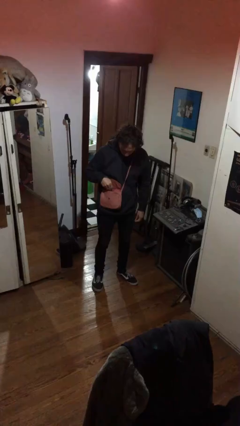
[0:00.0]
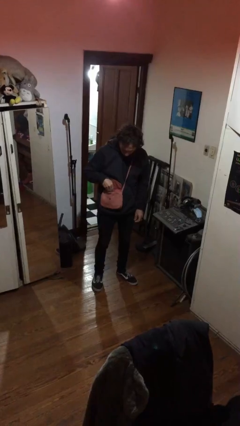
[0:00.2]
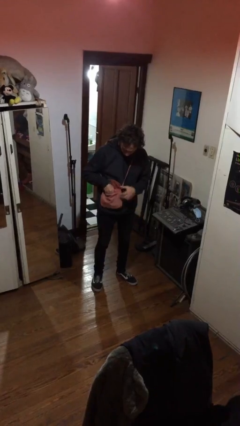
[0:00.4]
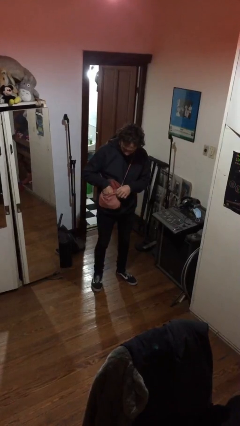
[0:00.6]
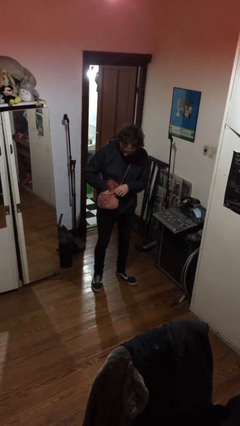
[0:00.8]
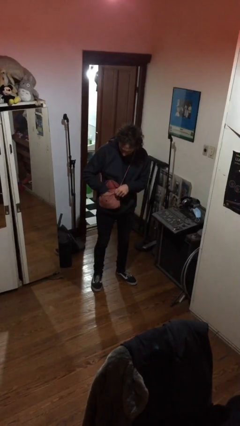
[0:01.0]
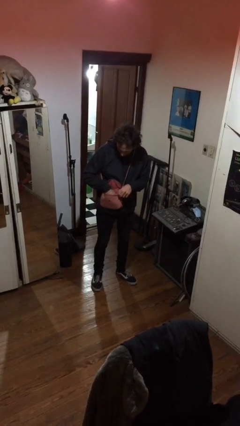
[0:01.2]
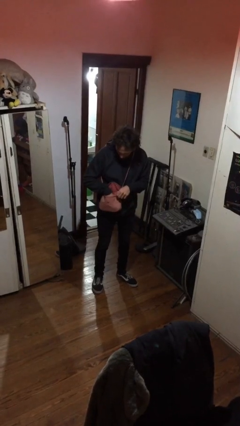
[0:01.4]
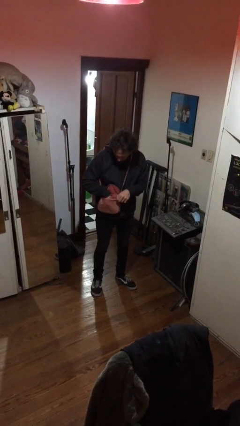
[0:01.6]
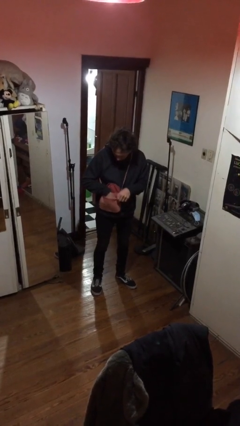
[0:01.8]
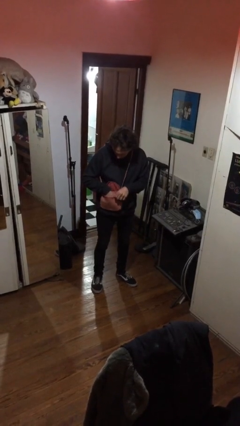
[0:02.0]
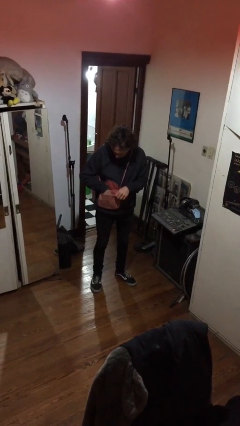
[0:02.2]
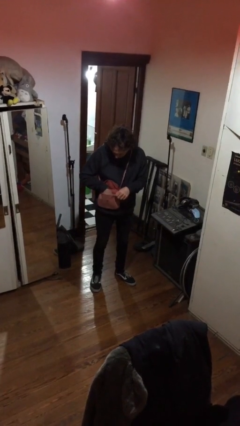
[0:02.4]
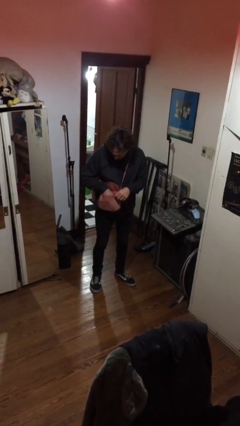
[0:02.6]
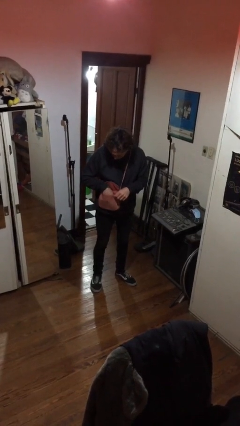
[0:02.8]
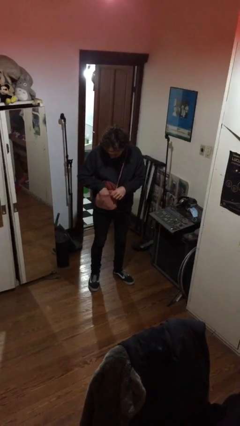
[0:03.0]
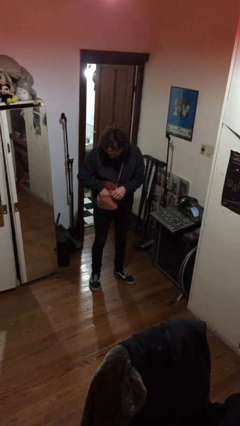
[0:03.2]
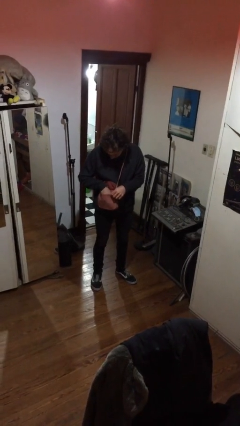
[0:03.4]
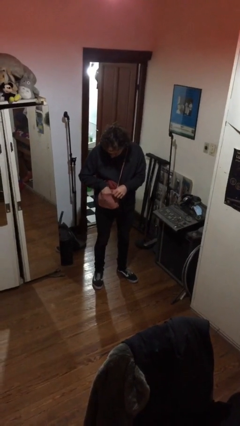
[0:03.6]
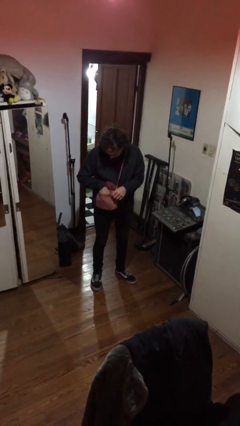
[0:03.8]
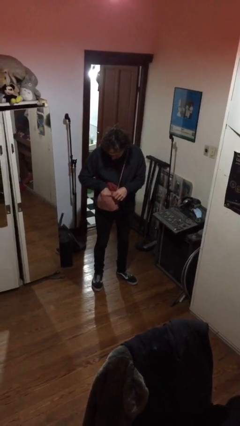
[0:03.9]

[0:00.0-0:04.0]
person searches in purse

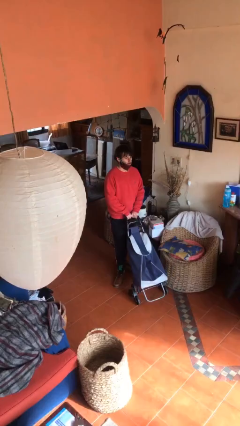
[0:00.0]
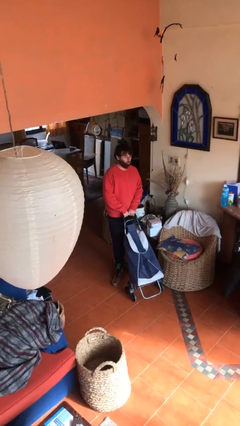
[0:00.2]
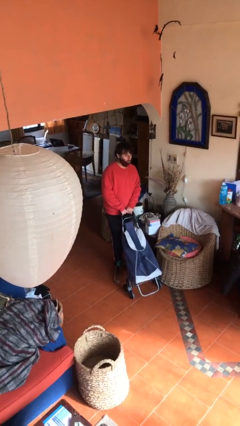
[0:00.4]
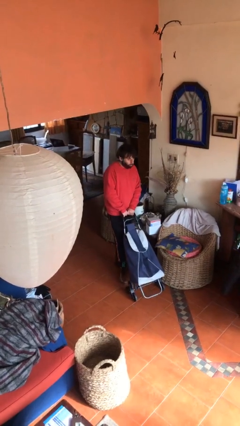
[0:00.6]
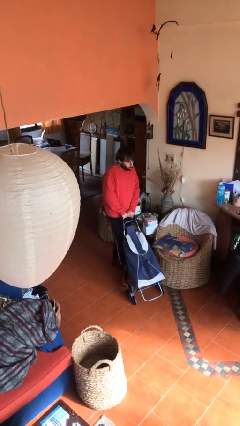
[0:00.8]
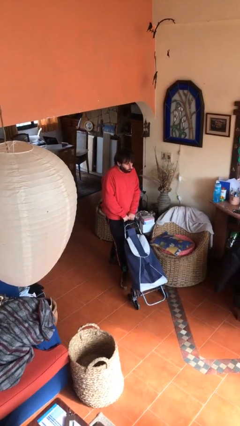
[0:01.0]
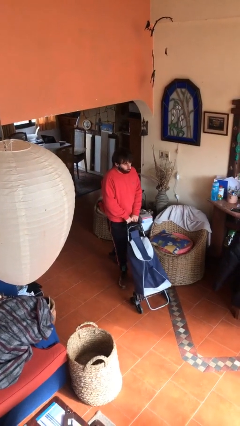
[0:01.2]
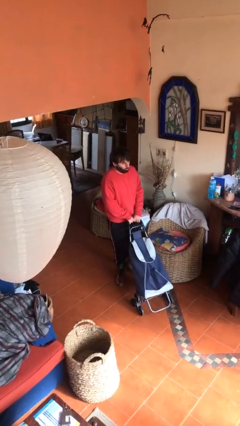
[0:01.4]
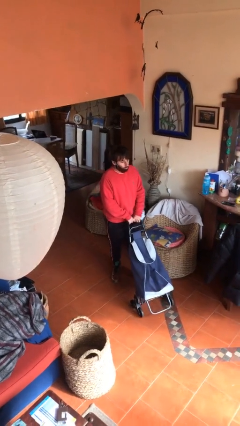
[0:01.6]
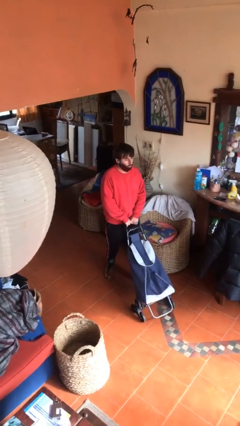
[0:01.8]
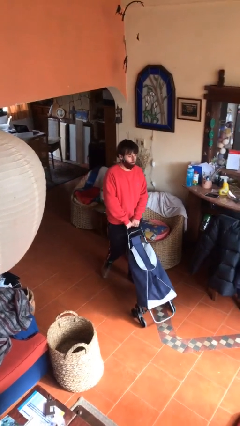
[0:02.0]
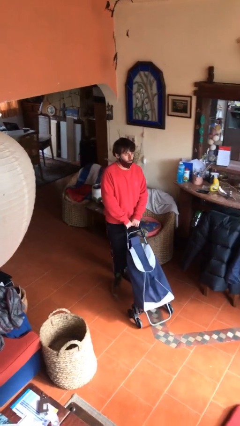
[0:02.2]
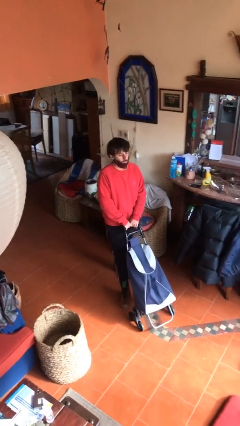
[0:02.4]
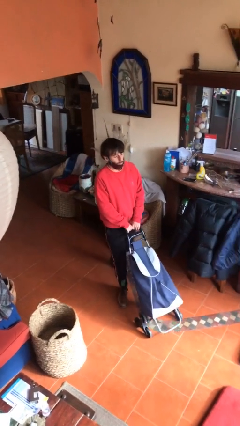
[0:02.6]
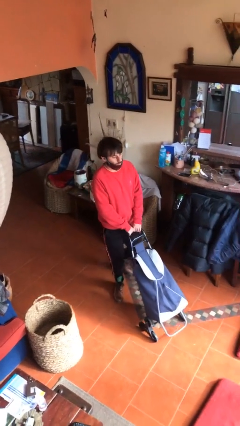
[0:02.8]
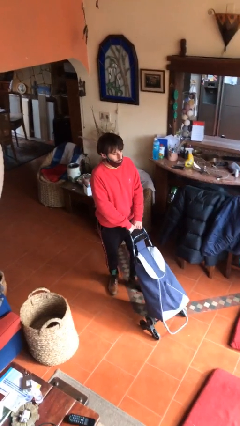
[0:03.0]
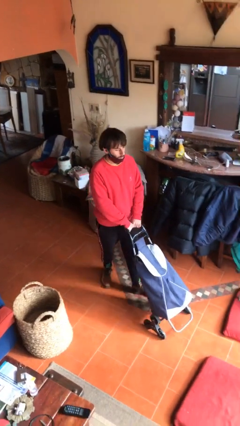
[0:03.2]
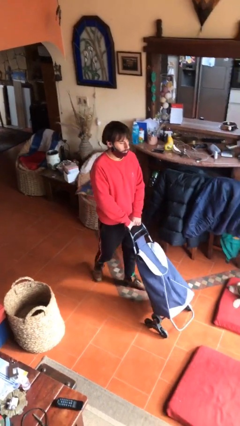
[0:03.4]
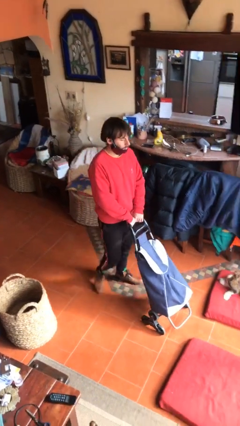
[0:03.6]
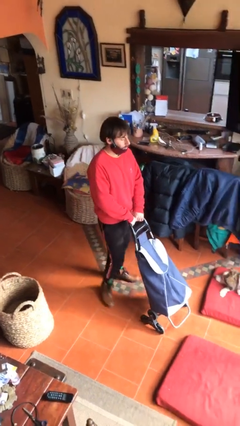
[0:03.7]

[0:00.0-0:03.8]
person pushes wheeled cart

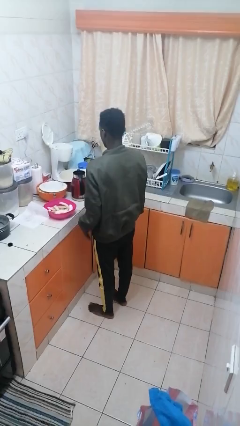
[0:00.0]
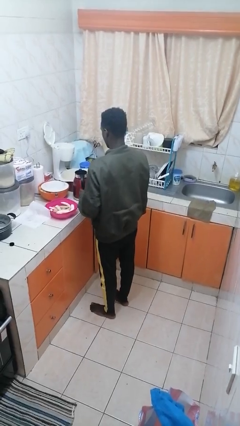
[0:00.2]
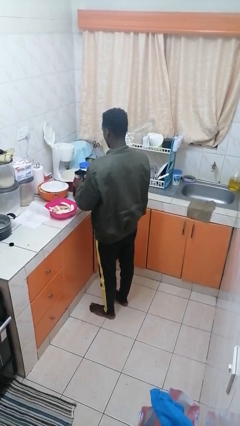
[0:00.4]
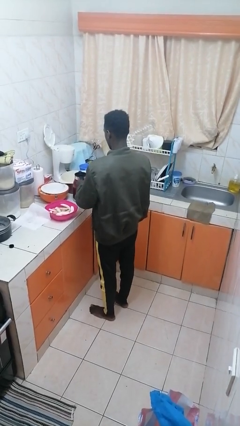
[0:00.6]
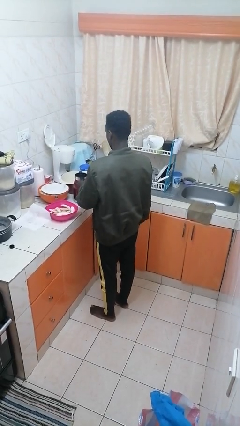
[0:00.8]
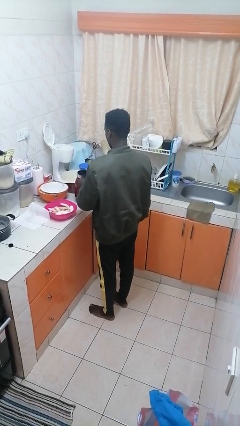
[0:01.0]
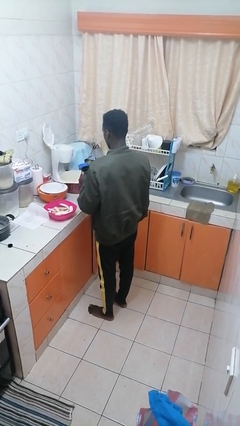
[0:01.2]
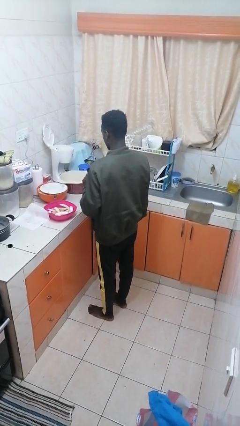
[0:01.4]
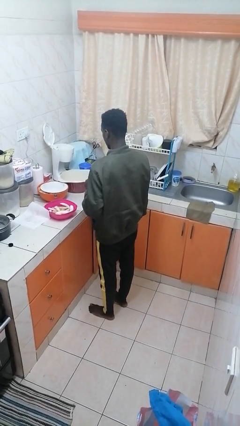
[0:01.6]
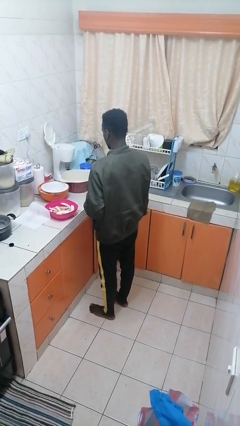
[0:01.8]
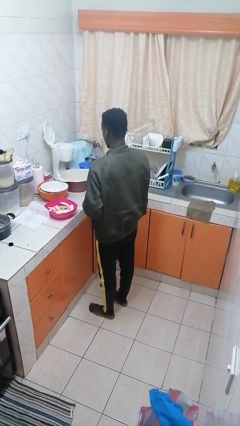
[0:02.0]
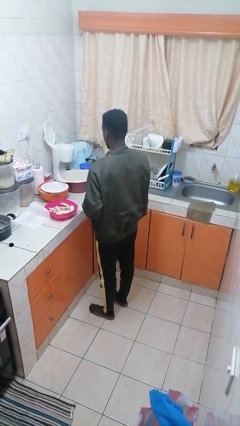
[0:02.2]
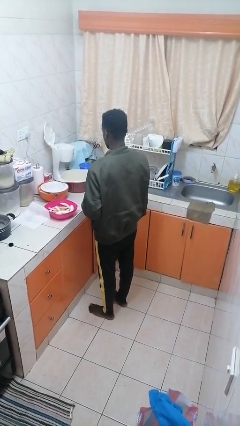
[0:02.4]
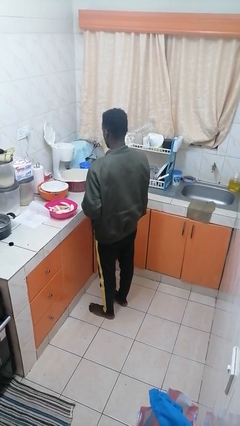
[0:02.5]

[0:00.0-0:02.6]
person picks up object from countertop

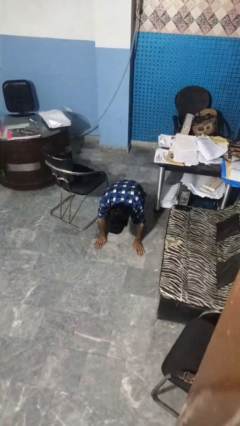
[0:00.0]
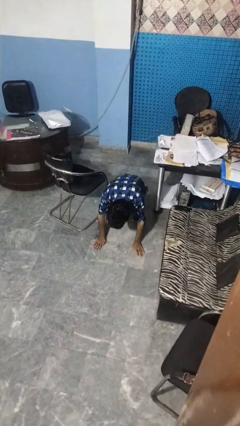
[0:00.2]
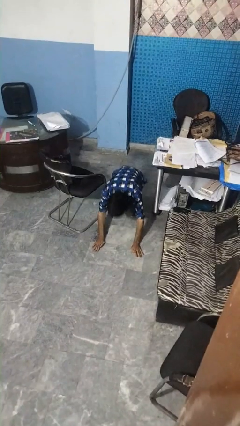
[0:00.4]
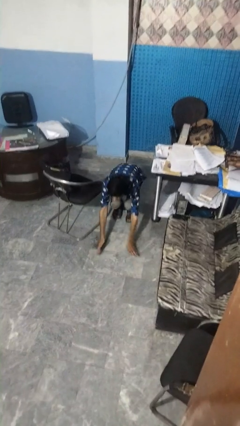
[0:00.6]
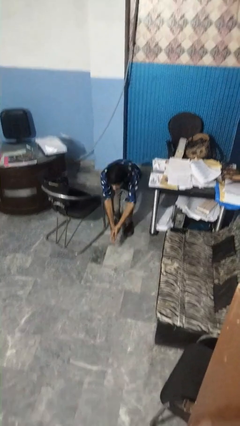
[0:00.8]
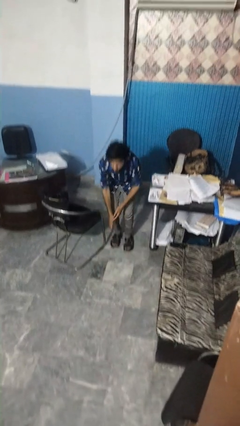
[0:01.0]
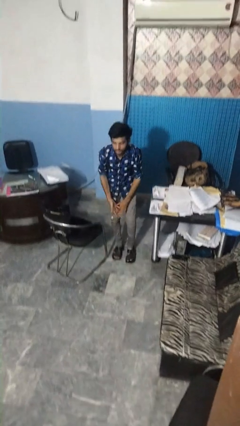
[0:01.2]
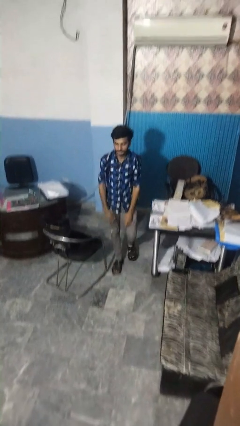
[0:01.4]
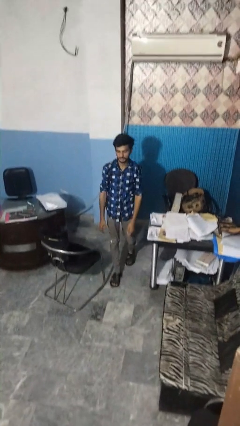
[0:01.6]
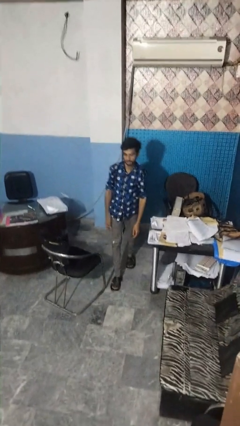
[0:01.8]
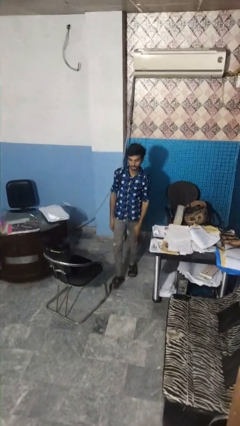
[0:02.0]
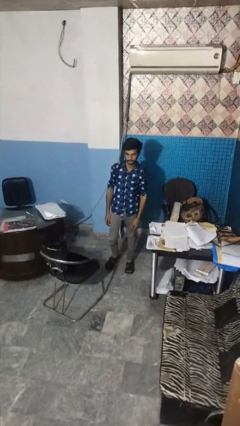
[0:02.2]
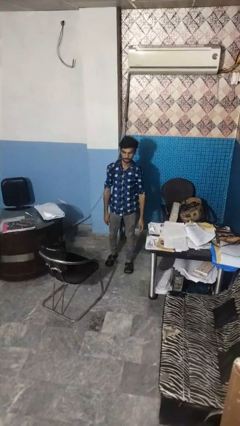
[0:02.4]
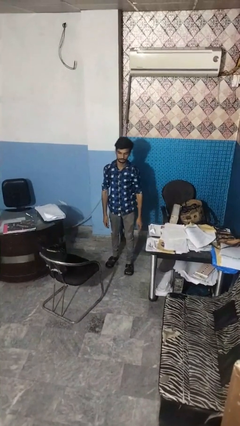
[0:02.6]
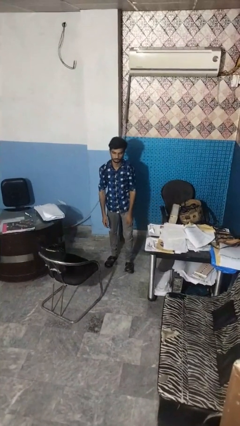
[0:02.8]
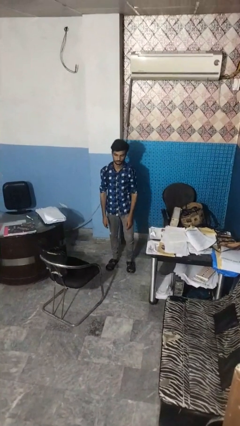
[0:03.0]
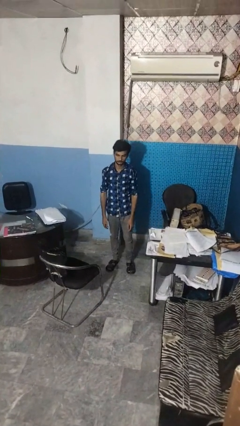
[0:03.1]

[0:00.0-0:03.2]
person stands up from floor

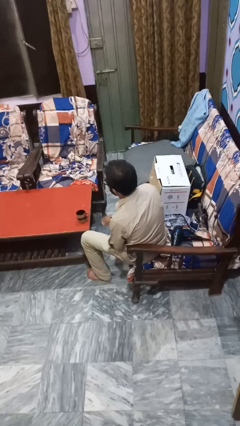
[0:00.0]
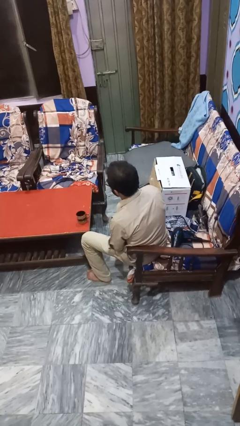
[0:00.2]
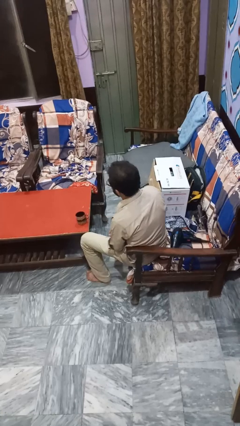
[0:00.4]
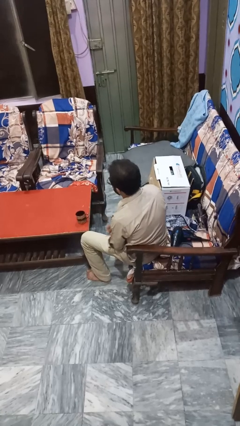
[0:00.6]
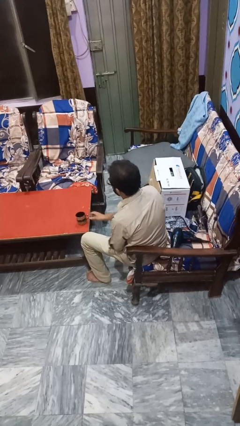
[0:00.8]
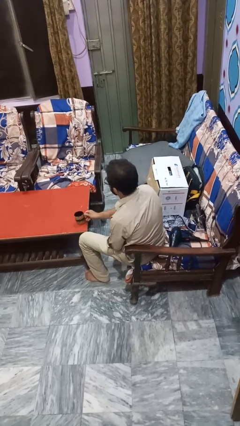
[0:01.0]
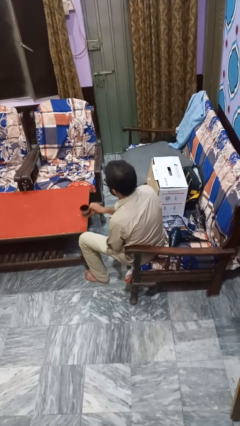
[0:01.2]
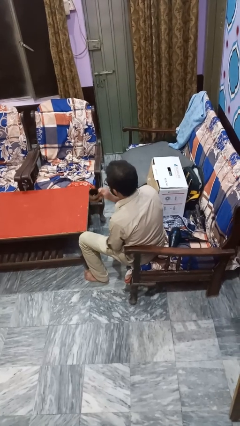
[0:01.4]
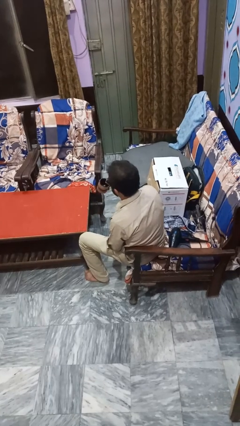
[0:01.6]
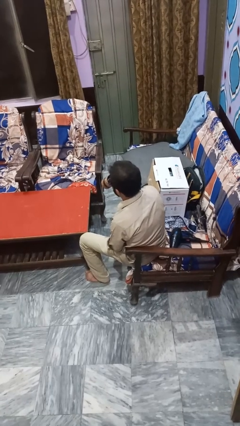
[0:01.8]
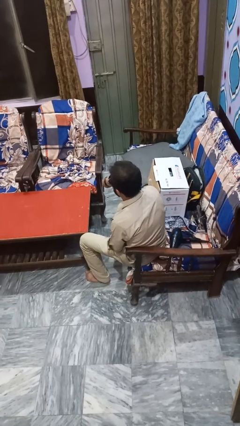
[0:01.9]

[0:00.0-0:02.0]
person pours coffee into mug

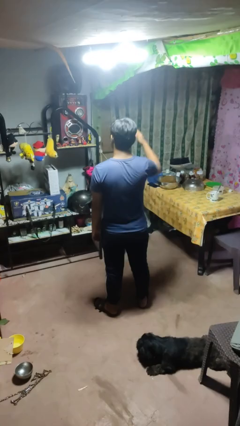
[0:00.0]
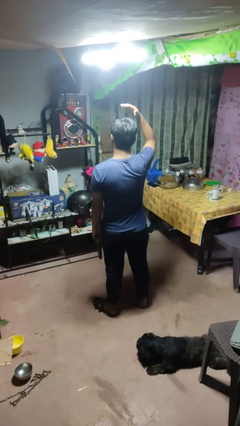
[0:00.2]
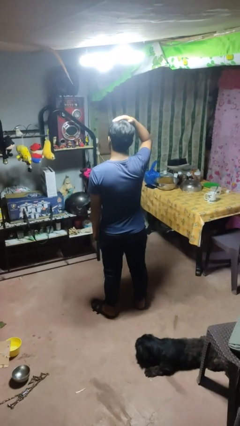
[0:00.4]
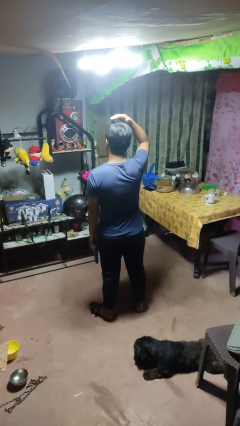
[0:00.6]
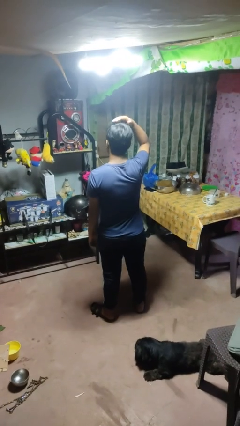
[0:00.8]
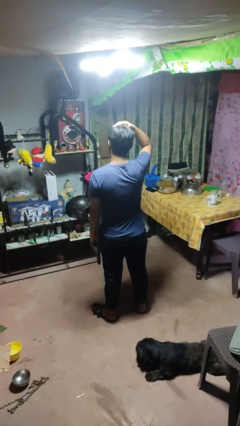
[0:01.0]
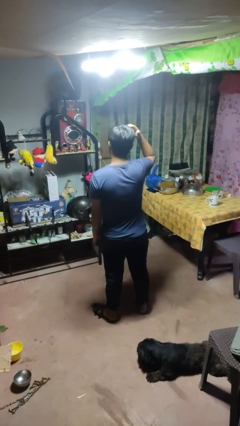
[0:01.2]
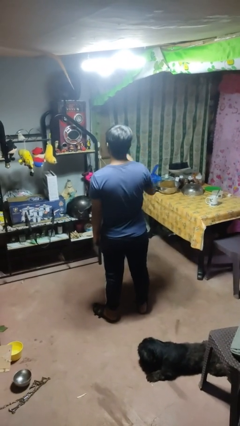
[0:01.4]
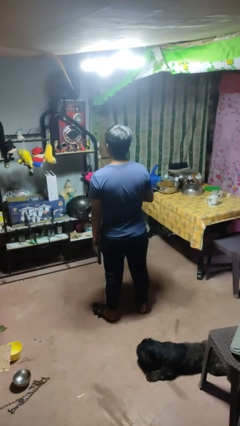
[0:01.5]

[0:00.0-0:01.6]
person pats head

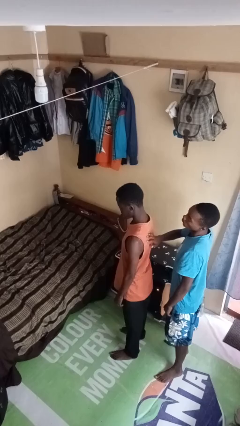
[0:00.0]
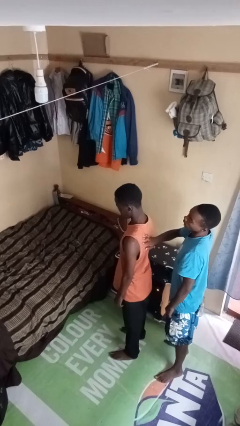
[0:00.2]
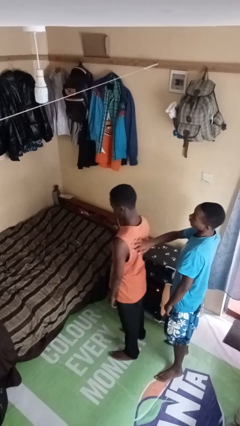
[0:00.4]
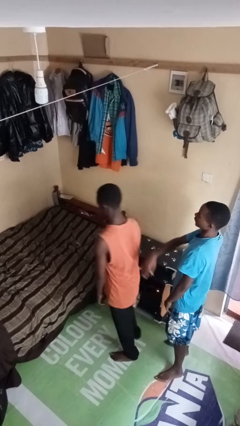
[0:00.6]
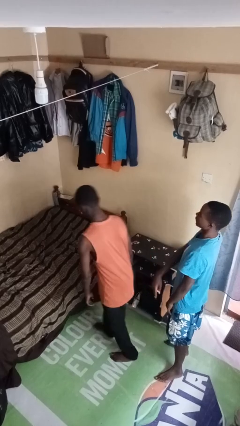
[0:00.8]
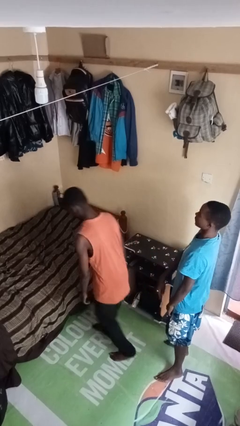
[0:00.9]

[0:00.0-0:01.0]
person shoves person
